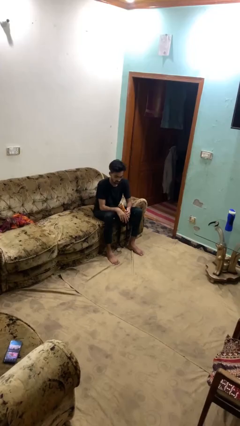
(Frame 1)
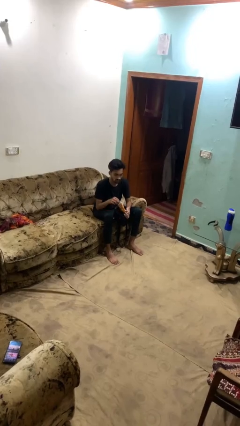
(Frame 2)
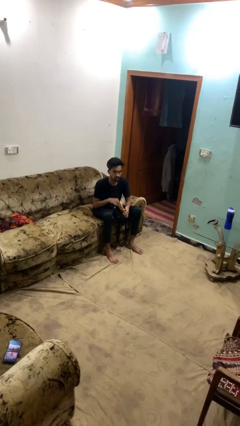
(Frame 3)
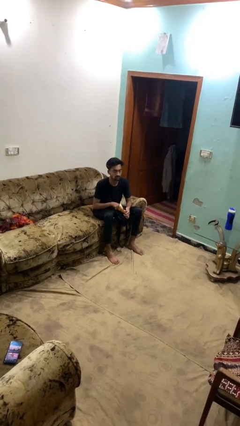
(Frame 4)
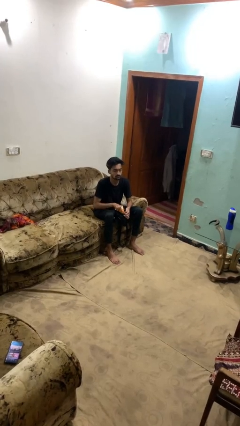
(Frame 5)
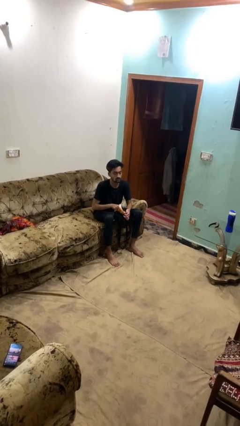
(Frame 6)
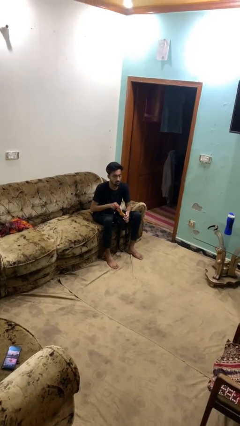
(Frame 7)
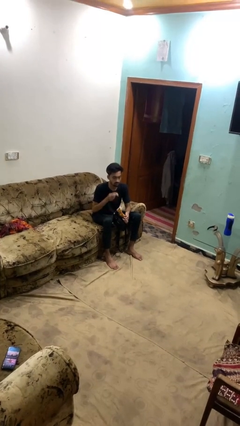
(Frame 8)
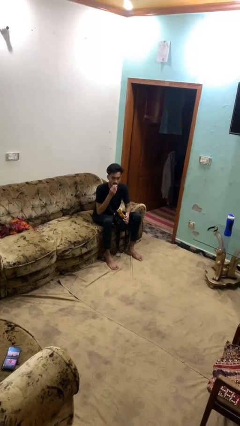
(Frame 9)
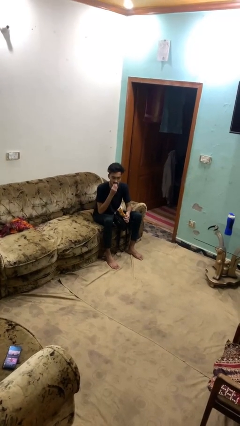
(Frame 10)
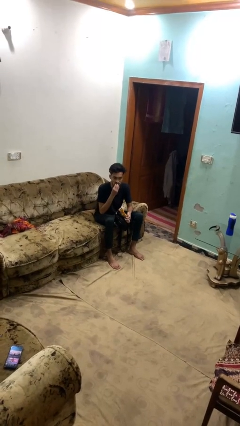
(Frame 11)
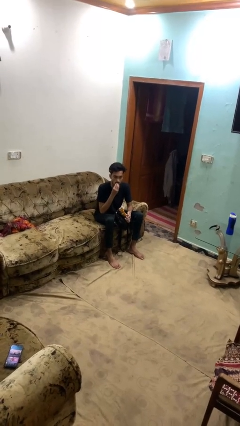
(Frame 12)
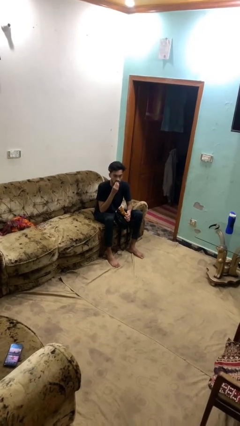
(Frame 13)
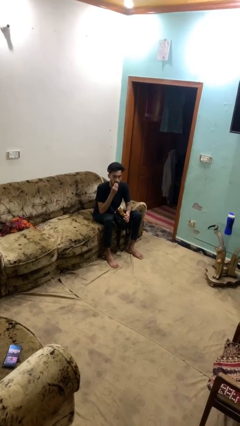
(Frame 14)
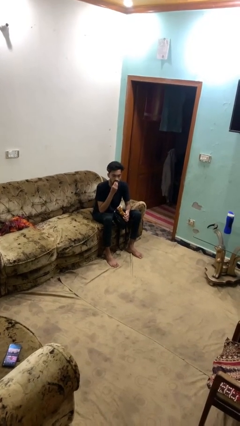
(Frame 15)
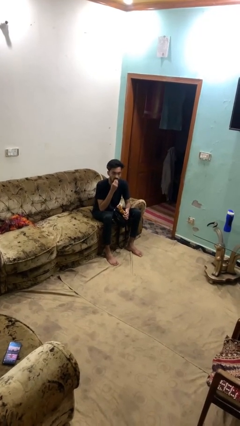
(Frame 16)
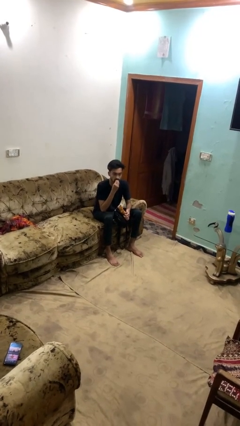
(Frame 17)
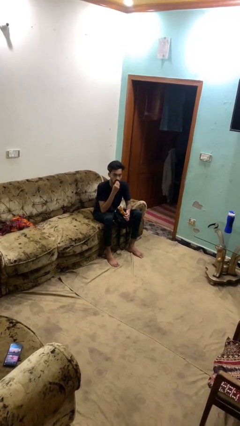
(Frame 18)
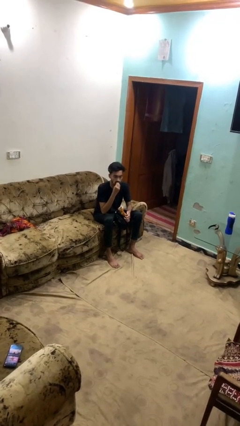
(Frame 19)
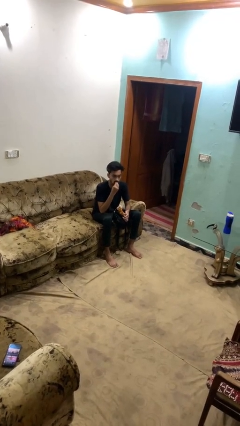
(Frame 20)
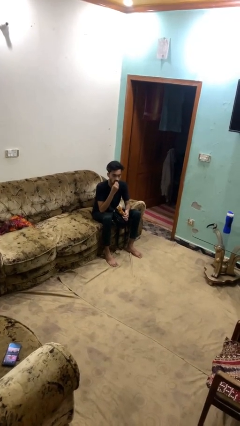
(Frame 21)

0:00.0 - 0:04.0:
person eats snack from bag

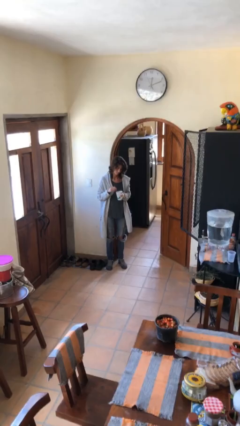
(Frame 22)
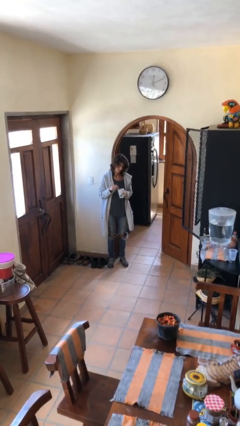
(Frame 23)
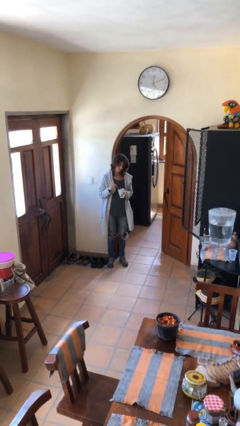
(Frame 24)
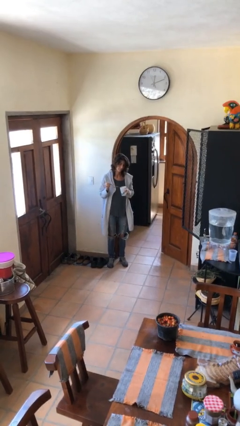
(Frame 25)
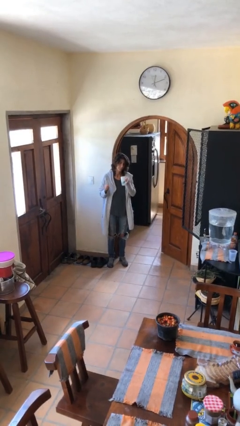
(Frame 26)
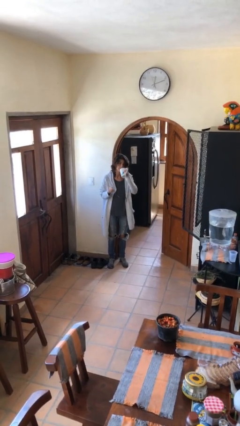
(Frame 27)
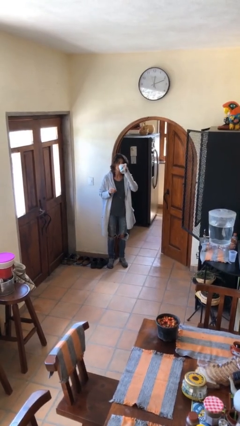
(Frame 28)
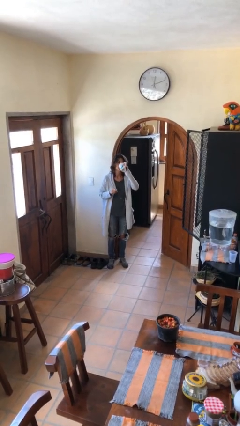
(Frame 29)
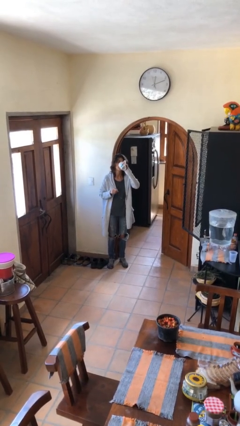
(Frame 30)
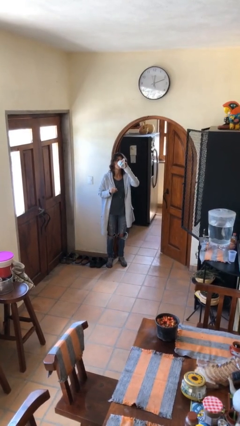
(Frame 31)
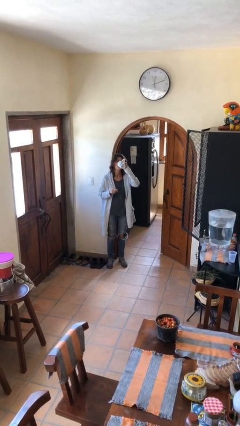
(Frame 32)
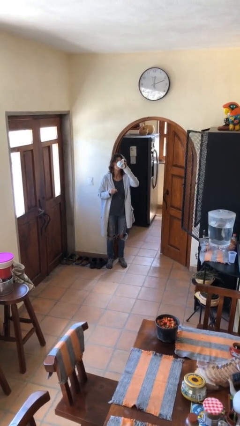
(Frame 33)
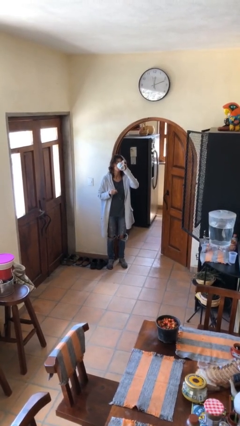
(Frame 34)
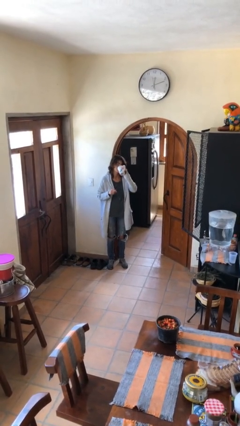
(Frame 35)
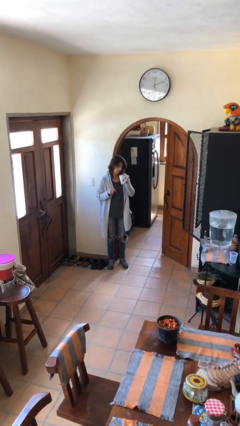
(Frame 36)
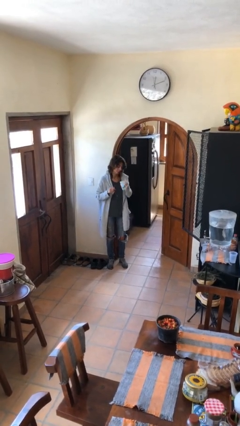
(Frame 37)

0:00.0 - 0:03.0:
person drinks from mug

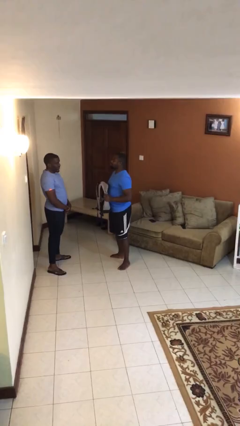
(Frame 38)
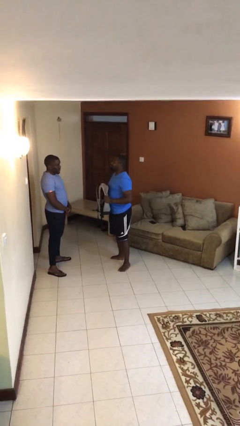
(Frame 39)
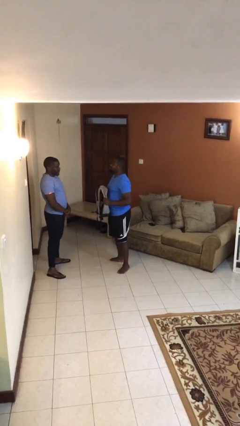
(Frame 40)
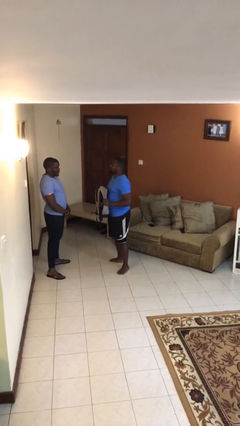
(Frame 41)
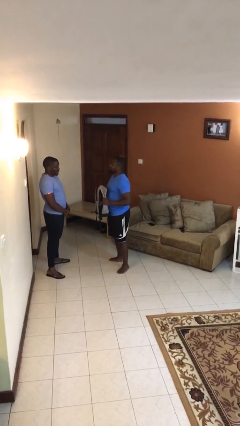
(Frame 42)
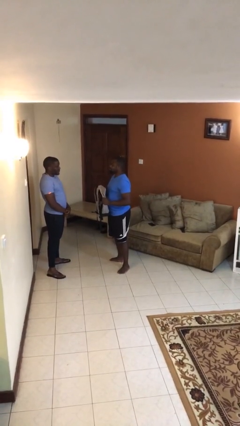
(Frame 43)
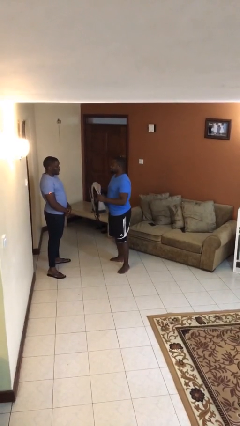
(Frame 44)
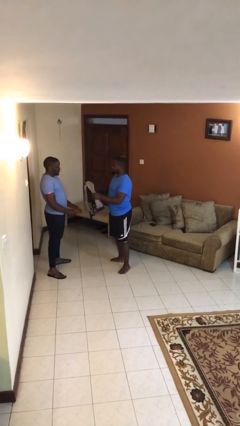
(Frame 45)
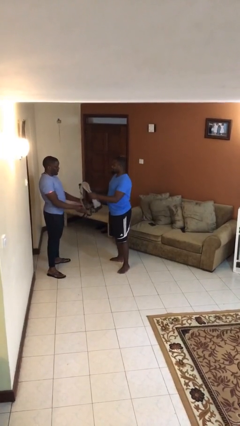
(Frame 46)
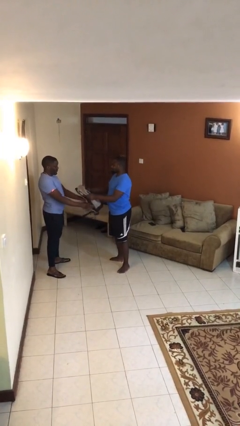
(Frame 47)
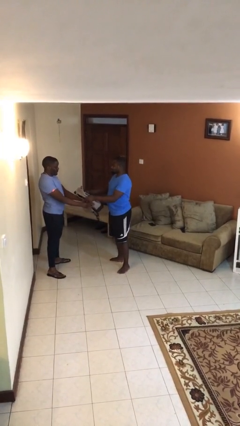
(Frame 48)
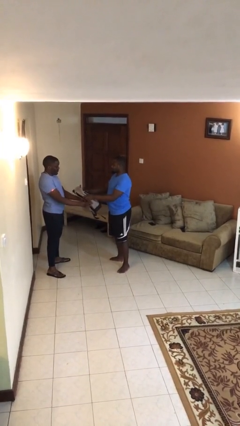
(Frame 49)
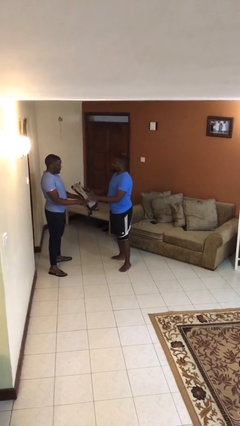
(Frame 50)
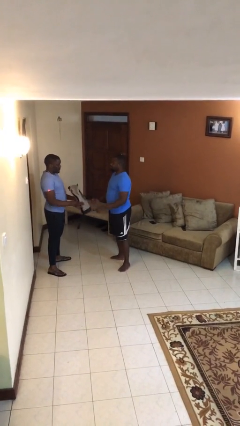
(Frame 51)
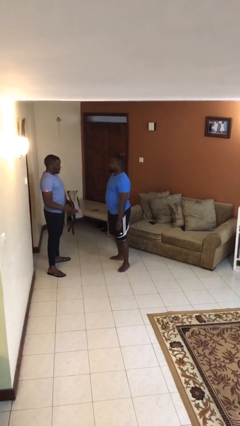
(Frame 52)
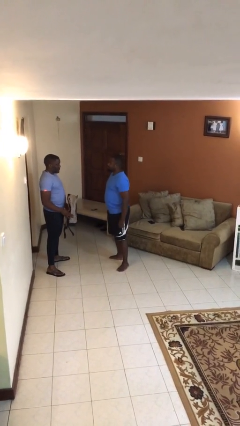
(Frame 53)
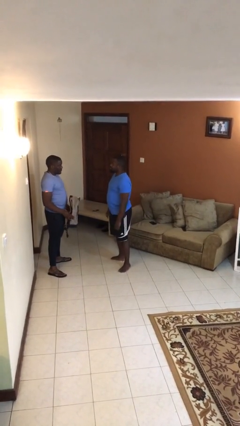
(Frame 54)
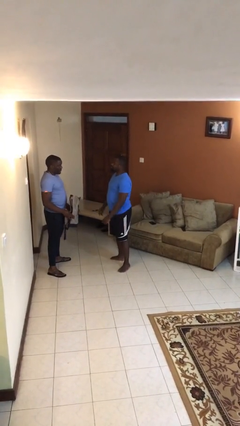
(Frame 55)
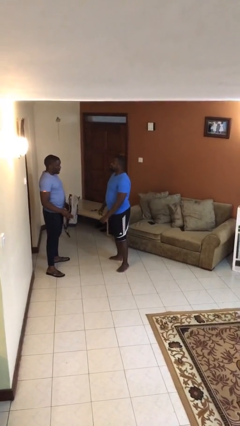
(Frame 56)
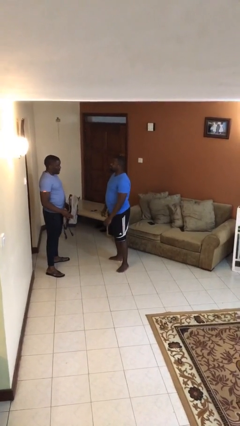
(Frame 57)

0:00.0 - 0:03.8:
person transfers object to person

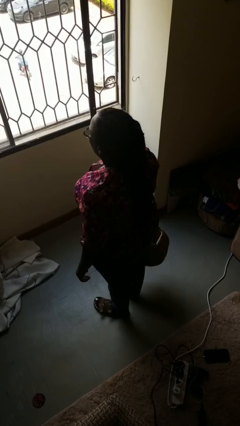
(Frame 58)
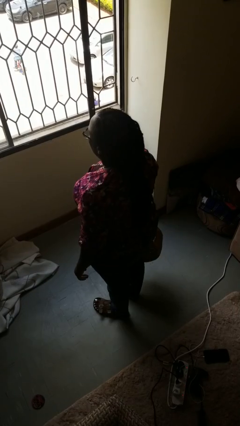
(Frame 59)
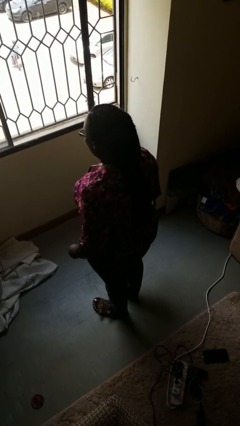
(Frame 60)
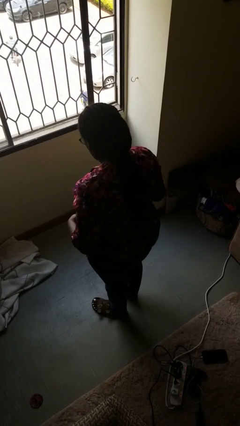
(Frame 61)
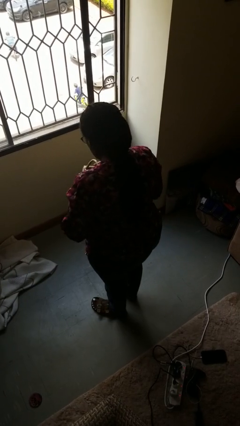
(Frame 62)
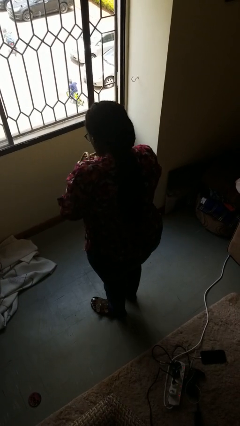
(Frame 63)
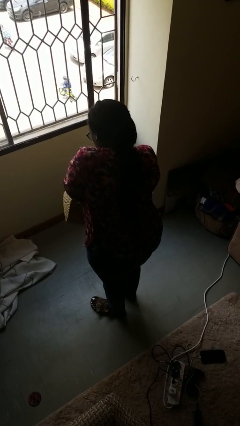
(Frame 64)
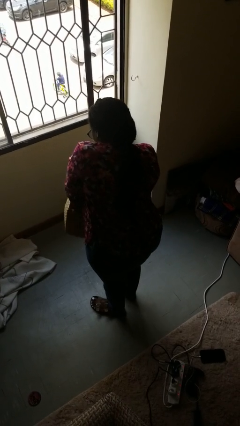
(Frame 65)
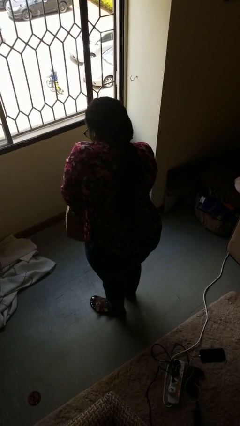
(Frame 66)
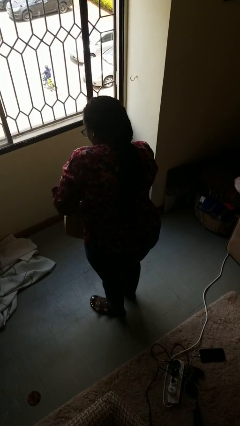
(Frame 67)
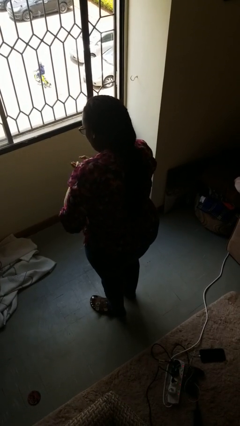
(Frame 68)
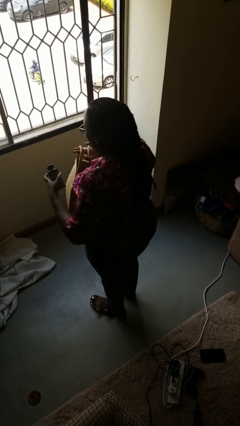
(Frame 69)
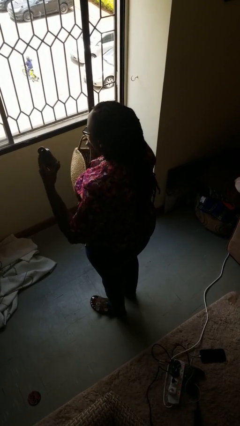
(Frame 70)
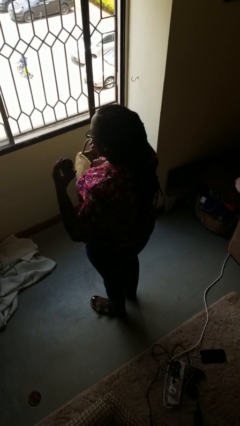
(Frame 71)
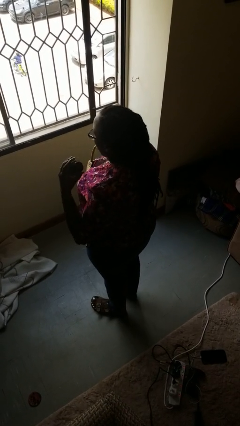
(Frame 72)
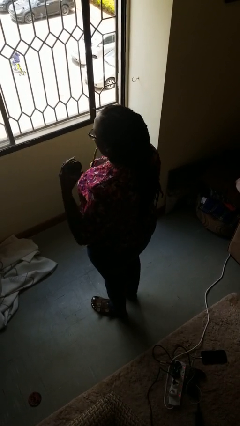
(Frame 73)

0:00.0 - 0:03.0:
person takes object from basket

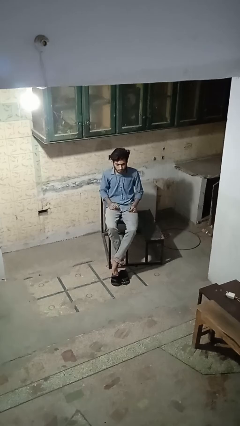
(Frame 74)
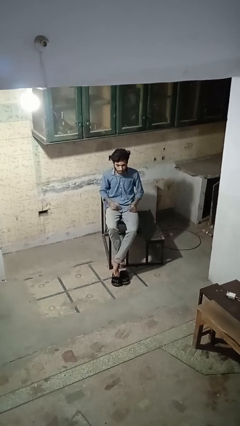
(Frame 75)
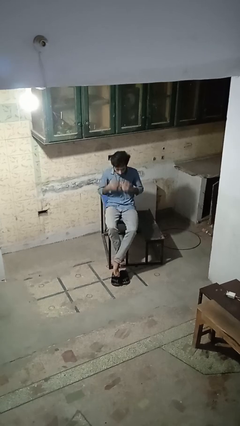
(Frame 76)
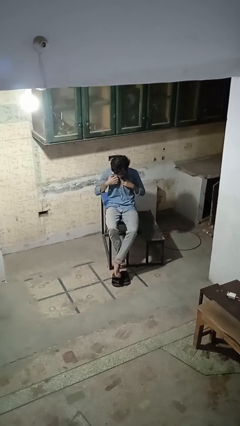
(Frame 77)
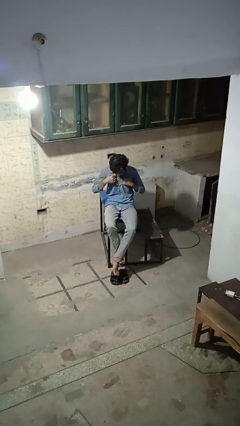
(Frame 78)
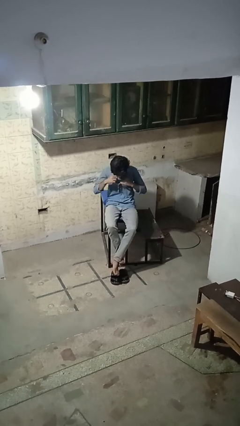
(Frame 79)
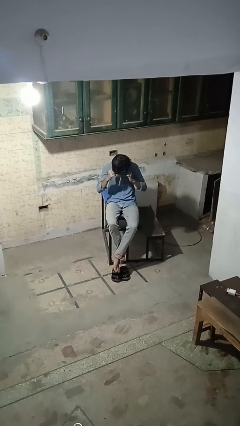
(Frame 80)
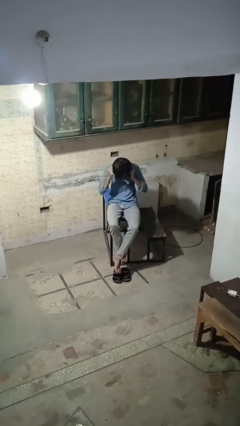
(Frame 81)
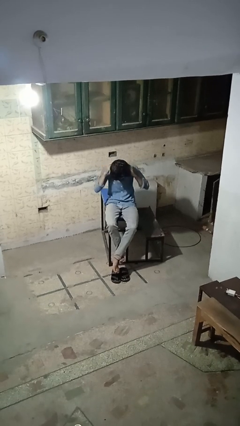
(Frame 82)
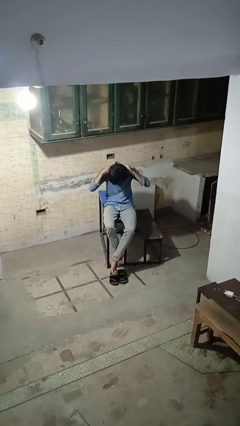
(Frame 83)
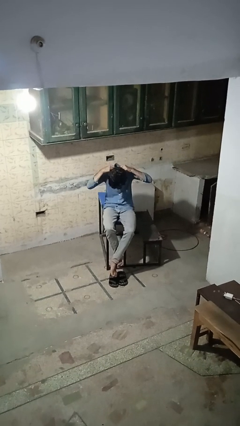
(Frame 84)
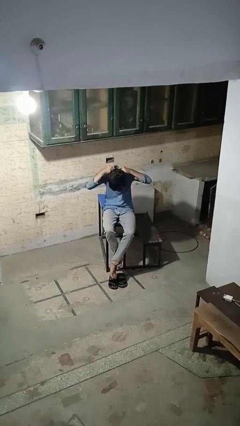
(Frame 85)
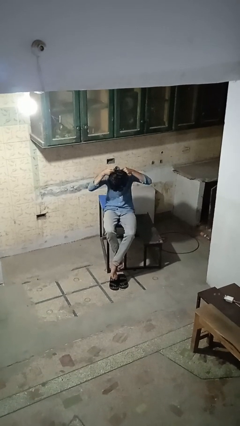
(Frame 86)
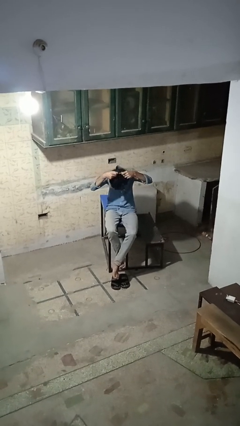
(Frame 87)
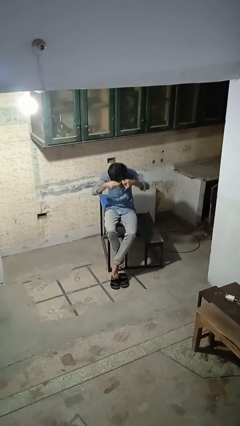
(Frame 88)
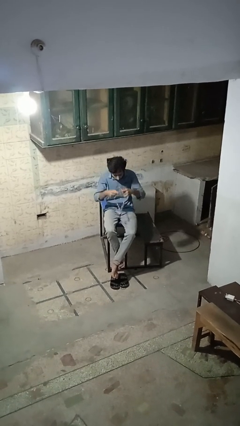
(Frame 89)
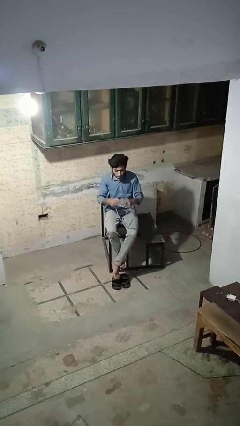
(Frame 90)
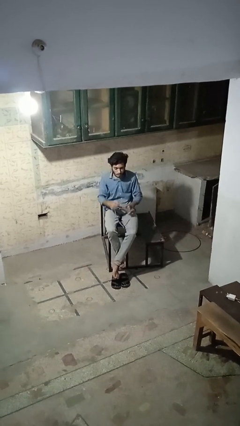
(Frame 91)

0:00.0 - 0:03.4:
person takes off necklace
